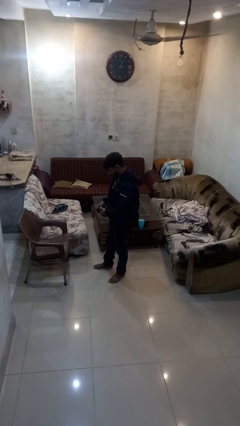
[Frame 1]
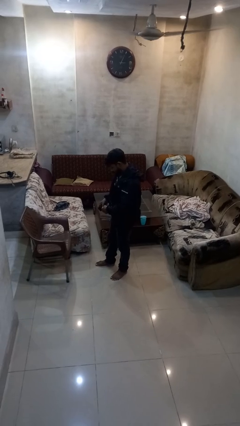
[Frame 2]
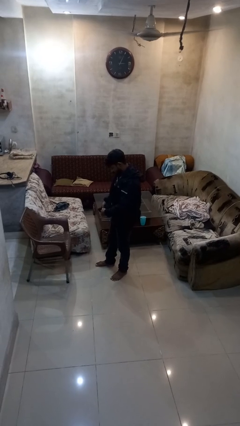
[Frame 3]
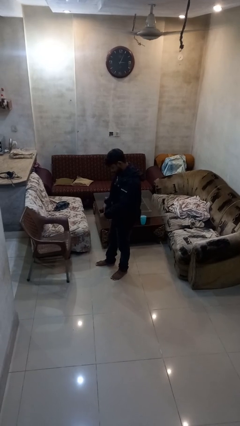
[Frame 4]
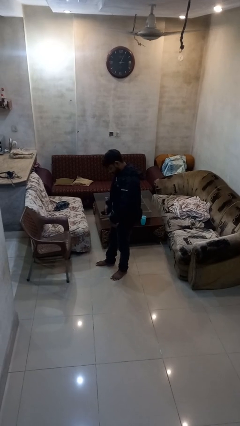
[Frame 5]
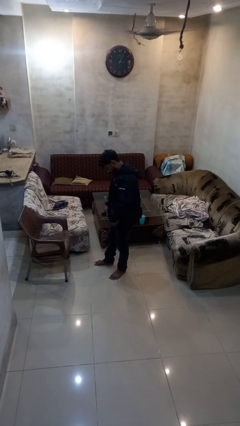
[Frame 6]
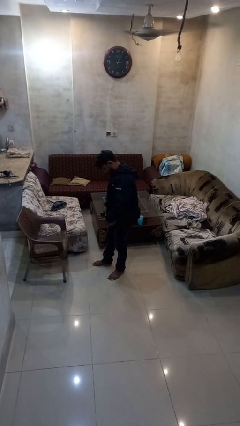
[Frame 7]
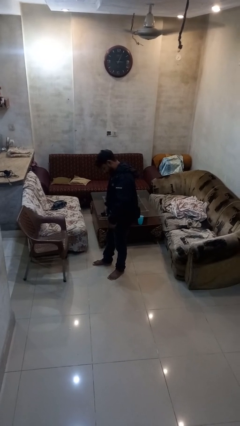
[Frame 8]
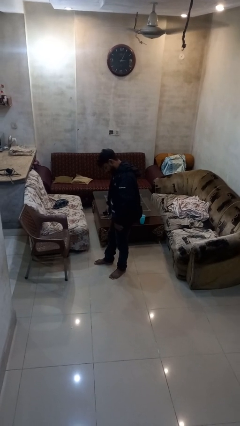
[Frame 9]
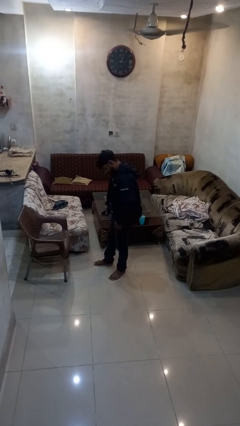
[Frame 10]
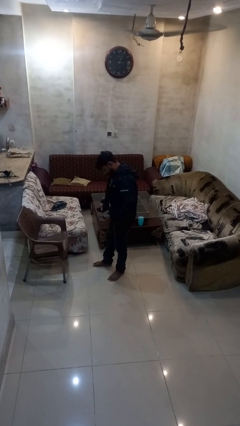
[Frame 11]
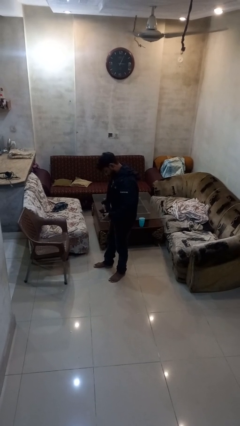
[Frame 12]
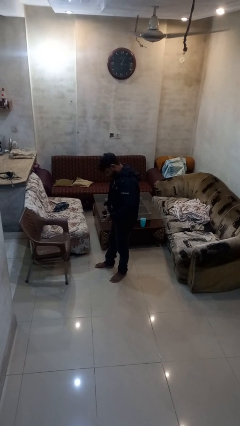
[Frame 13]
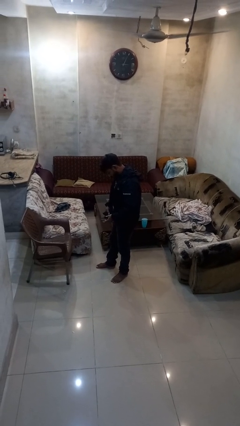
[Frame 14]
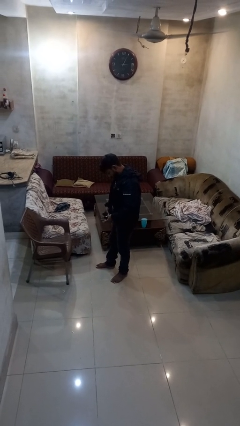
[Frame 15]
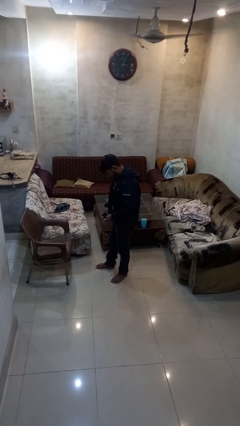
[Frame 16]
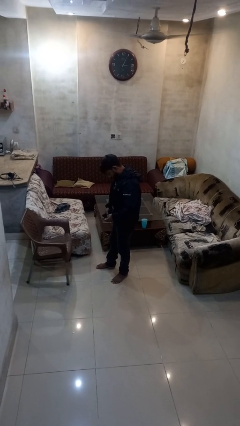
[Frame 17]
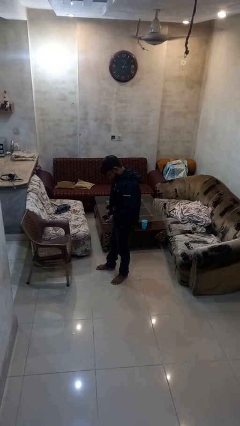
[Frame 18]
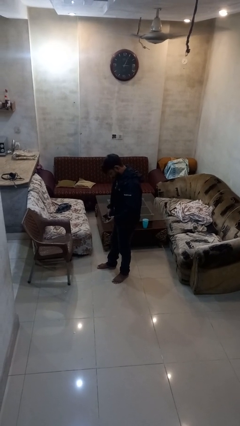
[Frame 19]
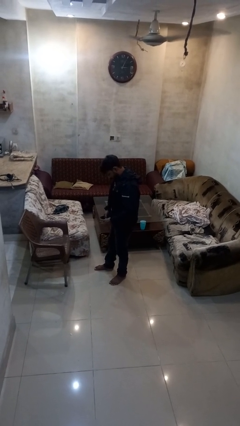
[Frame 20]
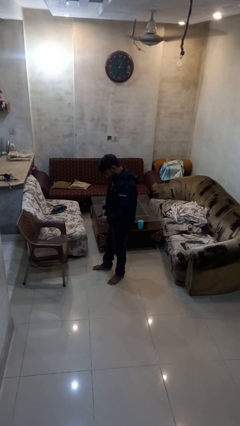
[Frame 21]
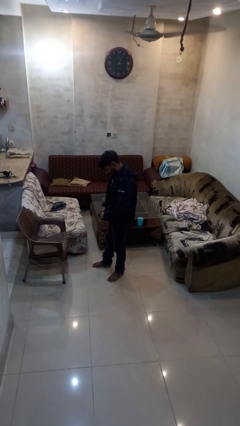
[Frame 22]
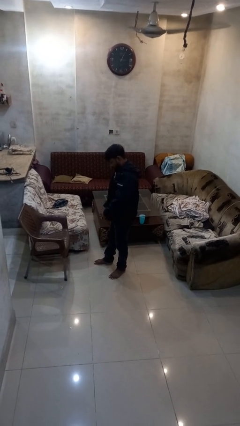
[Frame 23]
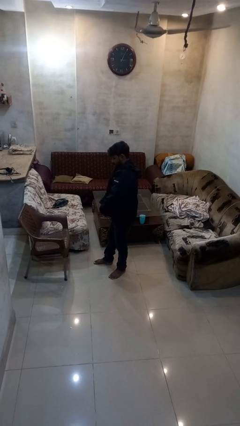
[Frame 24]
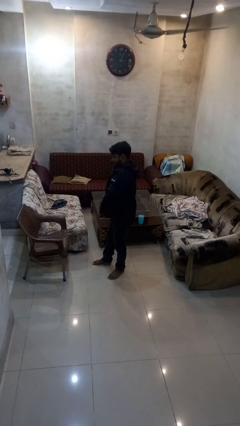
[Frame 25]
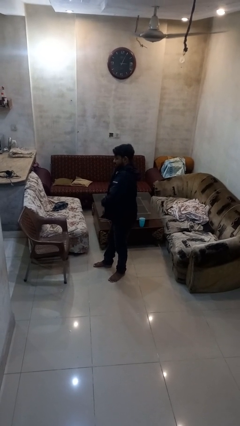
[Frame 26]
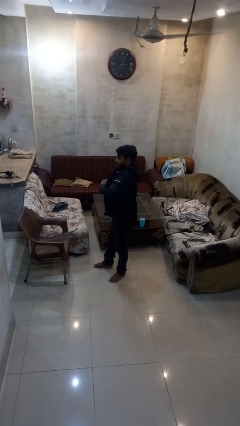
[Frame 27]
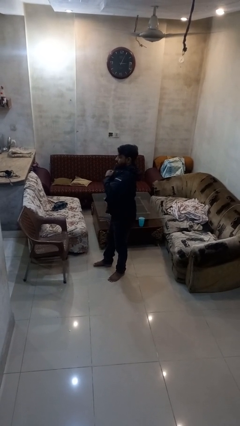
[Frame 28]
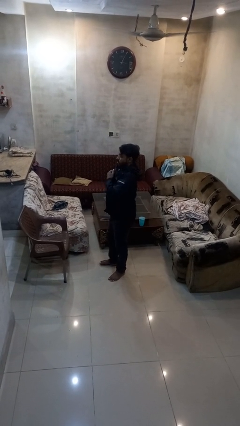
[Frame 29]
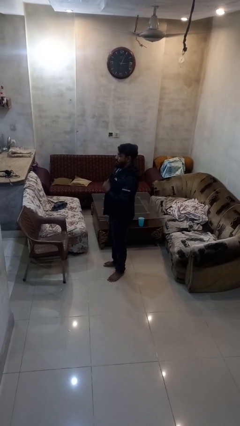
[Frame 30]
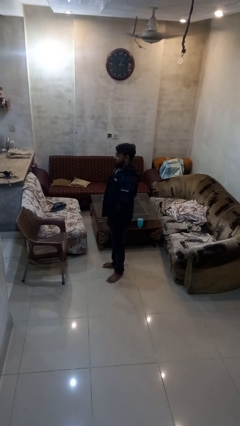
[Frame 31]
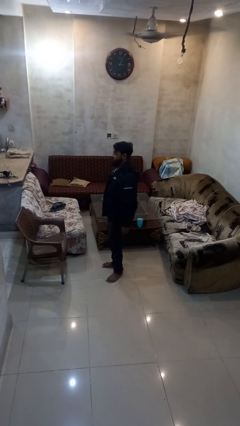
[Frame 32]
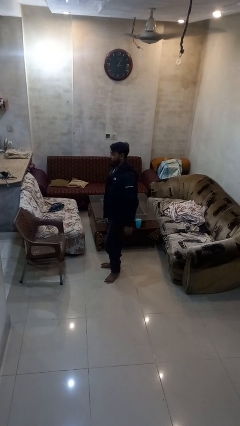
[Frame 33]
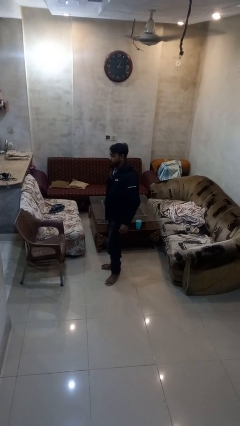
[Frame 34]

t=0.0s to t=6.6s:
person zips up jacket

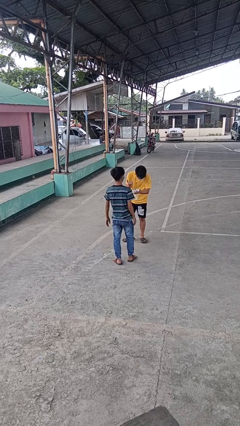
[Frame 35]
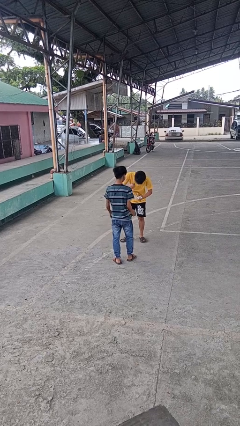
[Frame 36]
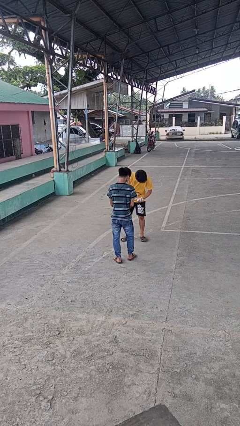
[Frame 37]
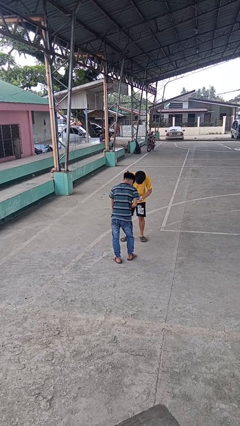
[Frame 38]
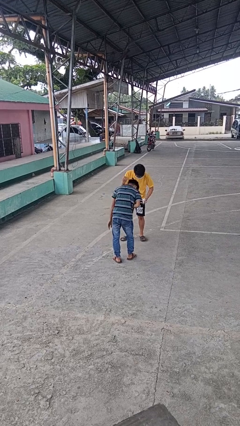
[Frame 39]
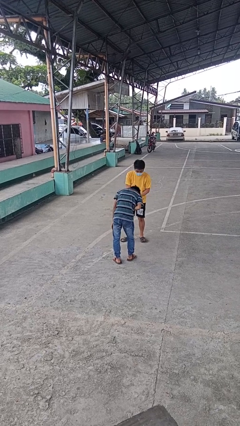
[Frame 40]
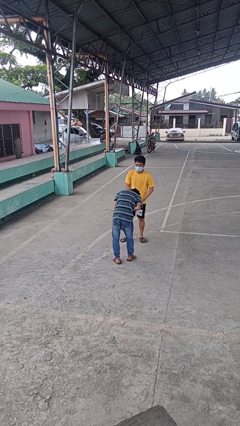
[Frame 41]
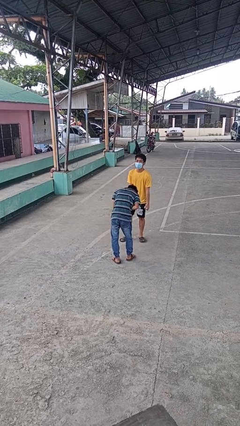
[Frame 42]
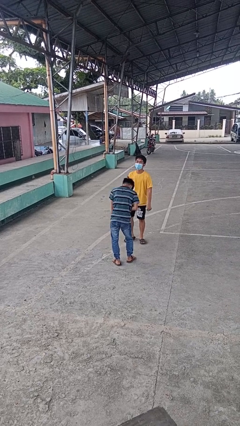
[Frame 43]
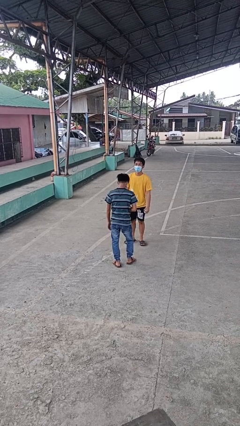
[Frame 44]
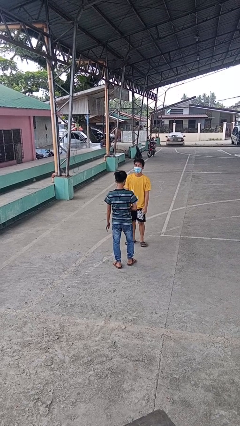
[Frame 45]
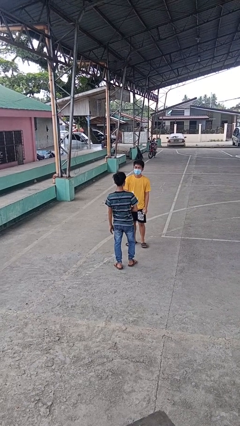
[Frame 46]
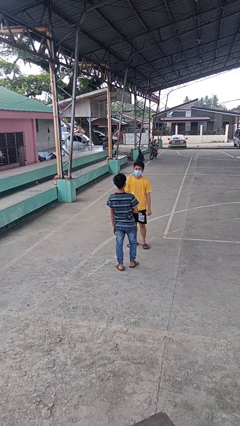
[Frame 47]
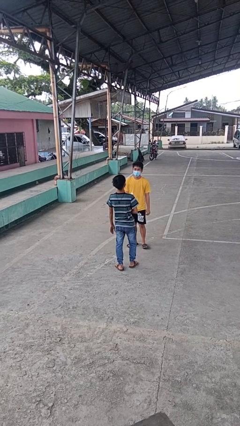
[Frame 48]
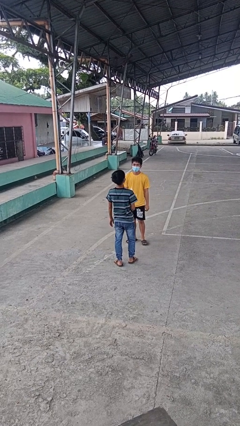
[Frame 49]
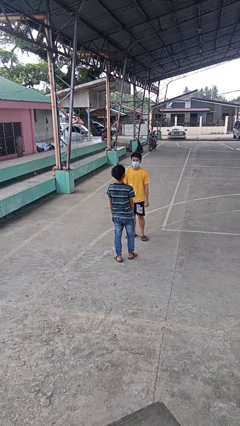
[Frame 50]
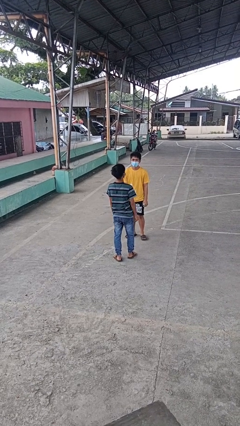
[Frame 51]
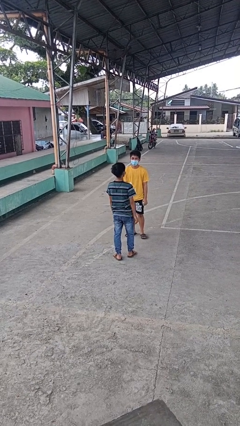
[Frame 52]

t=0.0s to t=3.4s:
person laughs with person

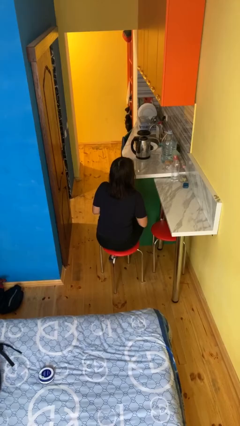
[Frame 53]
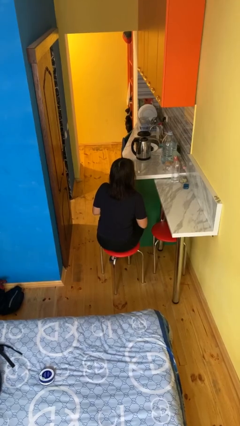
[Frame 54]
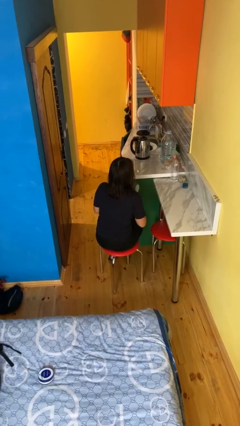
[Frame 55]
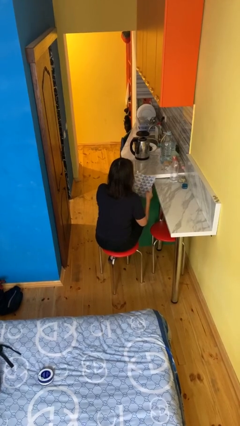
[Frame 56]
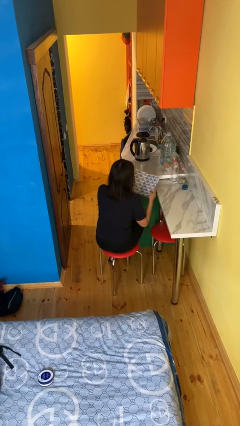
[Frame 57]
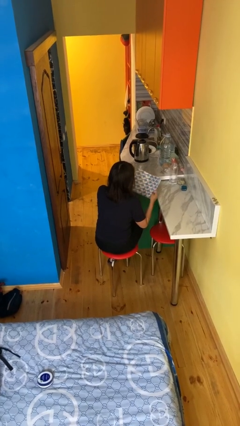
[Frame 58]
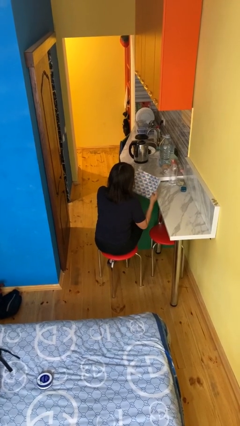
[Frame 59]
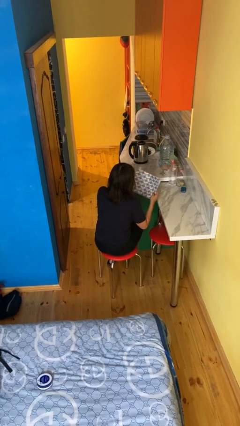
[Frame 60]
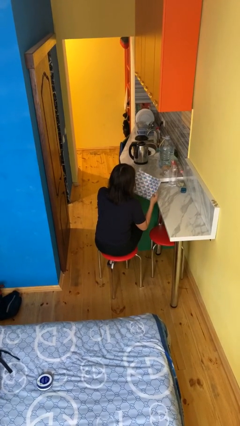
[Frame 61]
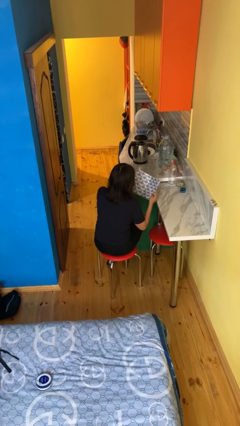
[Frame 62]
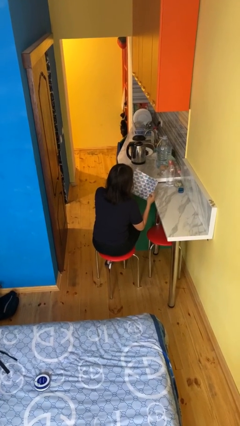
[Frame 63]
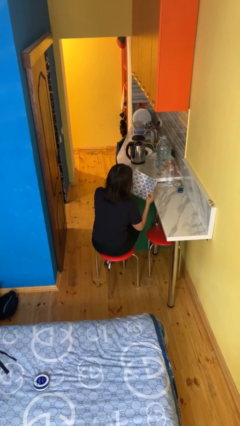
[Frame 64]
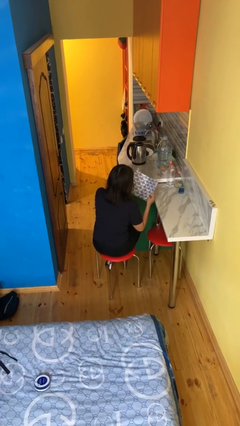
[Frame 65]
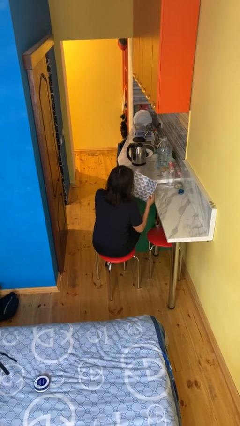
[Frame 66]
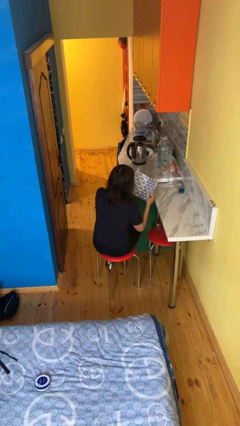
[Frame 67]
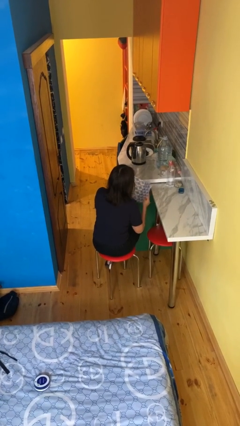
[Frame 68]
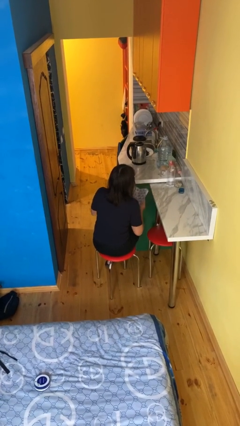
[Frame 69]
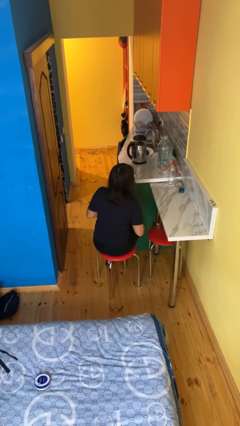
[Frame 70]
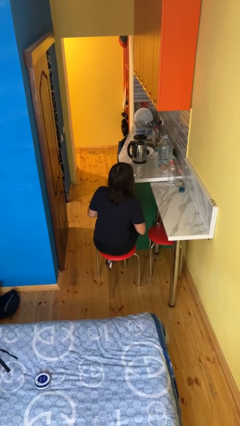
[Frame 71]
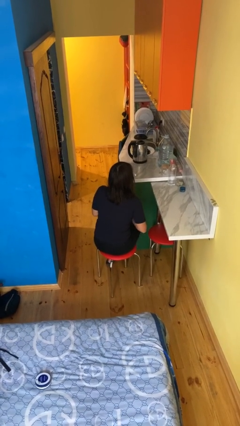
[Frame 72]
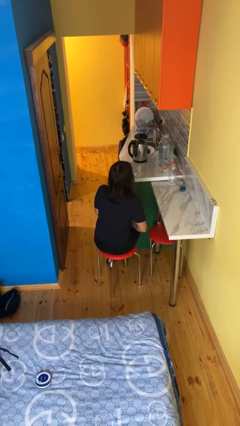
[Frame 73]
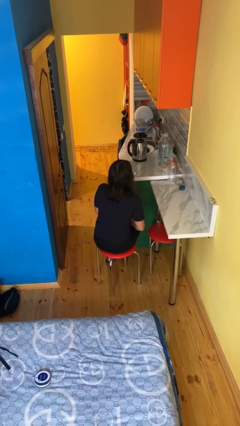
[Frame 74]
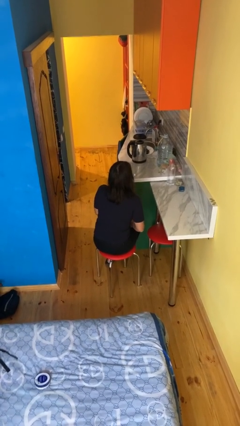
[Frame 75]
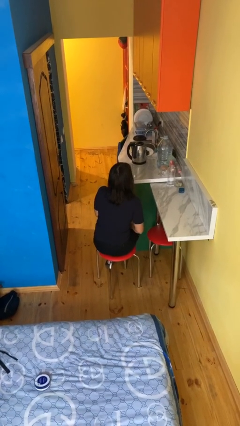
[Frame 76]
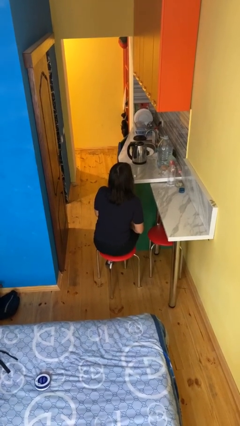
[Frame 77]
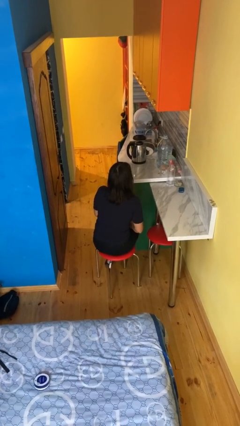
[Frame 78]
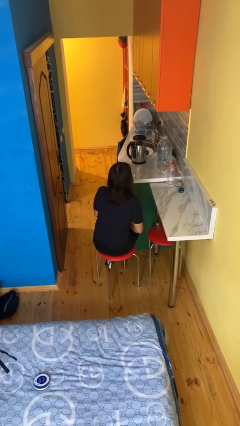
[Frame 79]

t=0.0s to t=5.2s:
person reads magazine

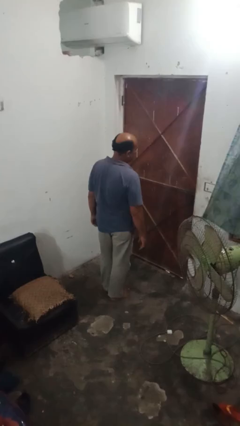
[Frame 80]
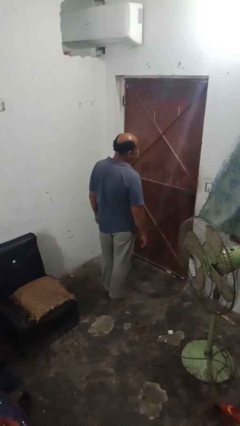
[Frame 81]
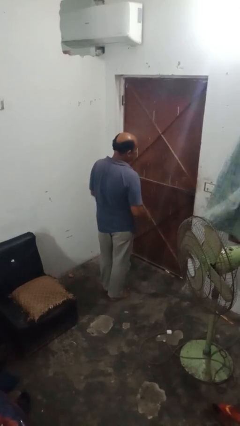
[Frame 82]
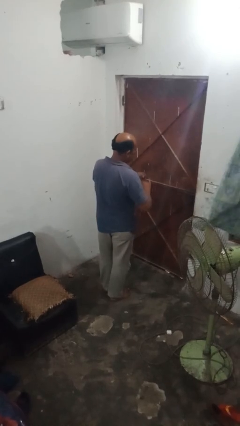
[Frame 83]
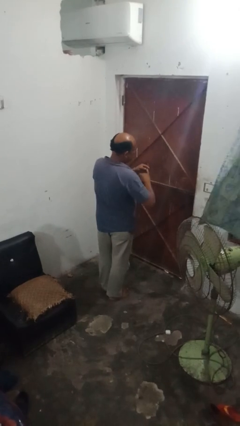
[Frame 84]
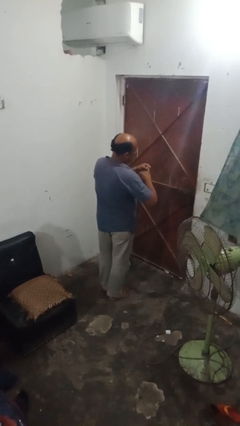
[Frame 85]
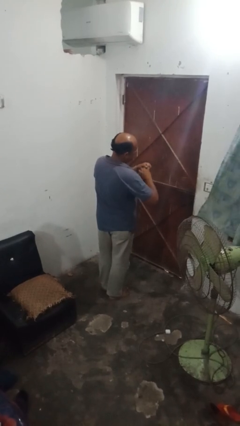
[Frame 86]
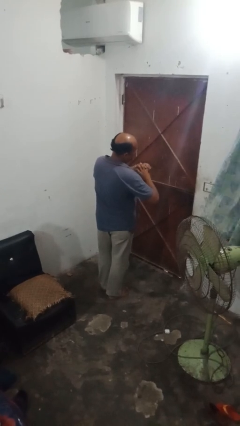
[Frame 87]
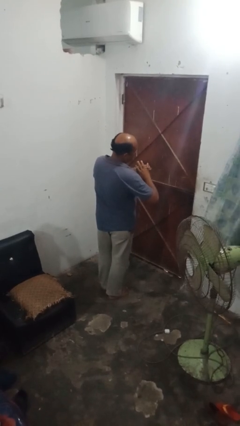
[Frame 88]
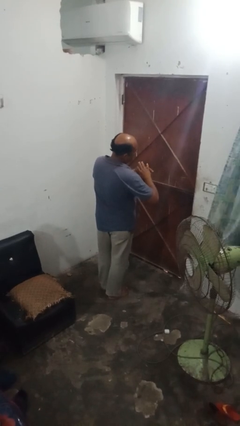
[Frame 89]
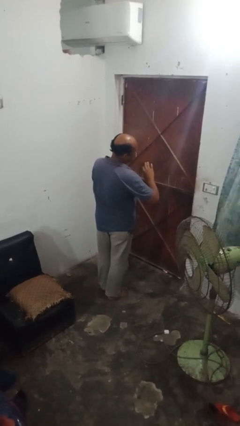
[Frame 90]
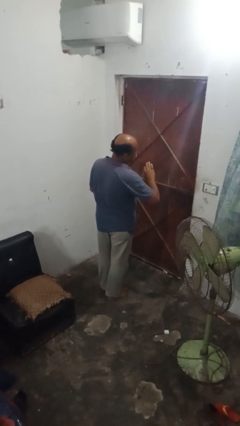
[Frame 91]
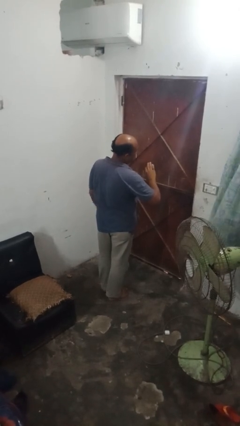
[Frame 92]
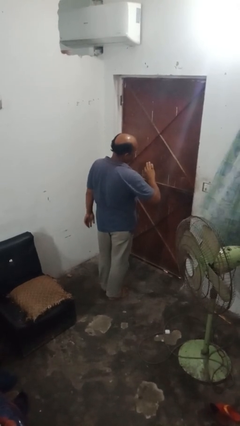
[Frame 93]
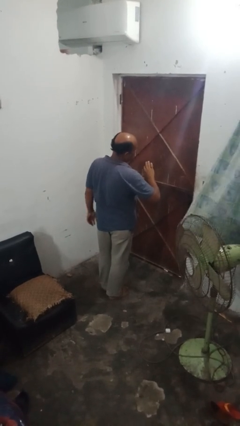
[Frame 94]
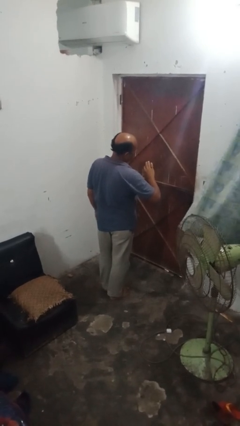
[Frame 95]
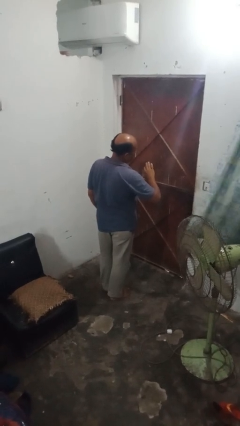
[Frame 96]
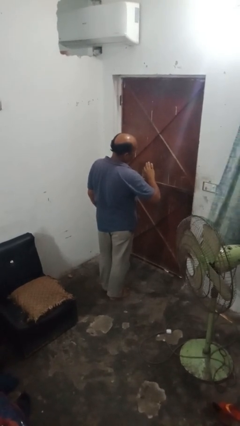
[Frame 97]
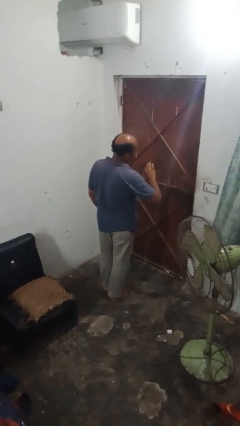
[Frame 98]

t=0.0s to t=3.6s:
person puts on ring
